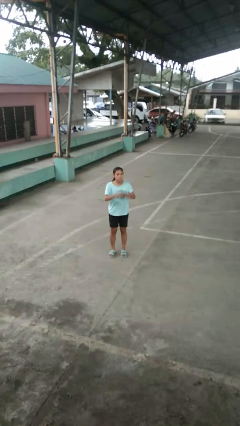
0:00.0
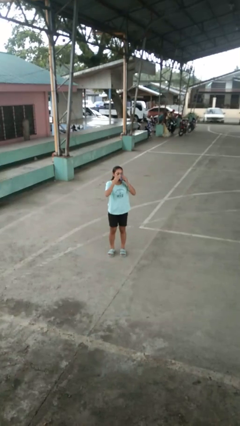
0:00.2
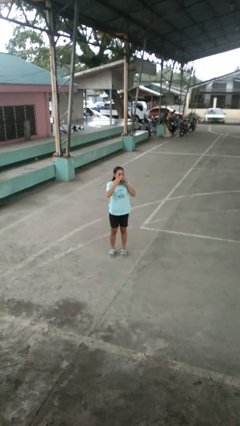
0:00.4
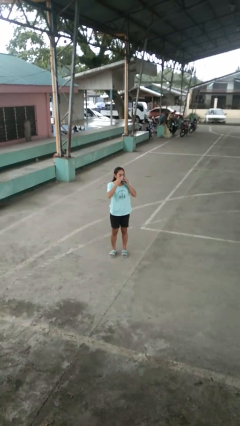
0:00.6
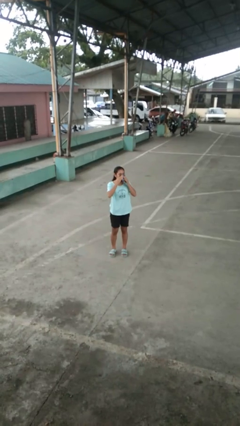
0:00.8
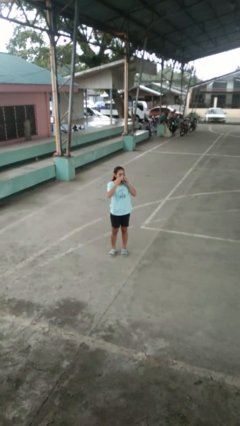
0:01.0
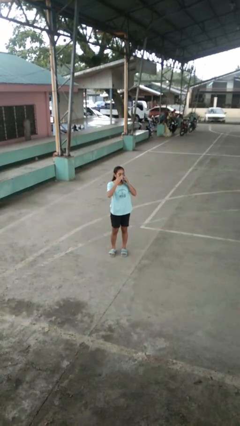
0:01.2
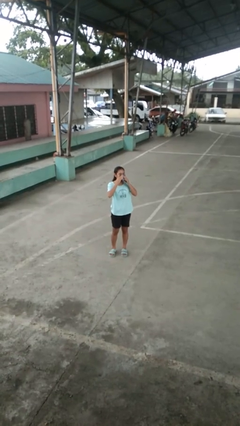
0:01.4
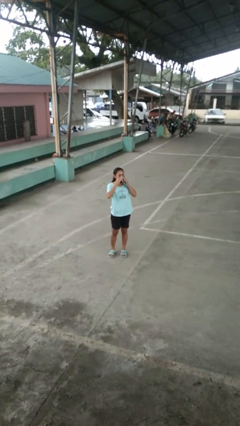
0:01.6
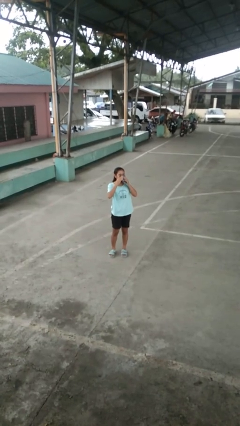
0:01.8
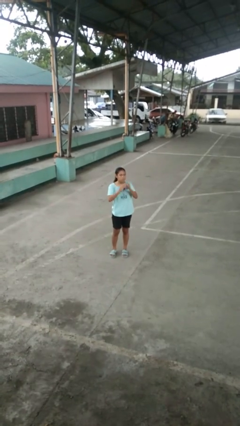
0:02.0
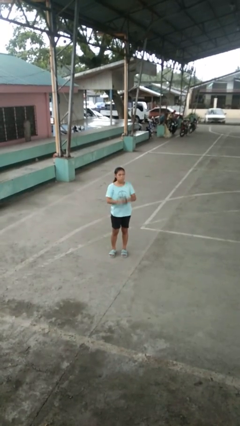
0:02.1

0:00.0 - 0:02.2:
person blows nose

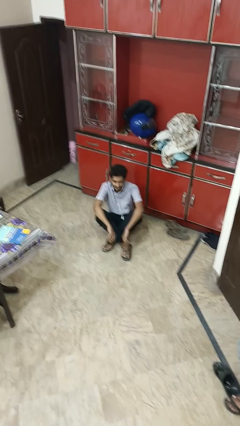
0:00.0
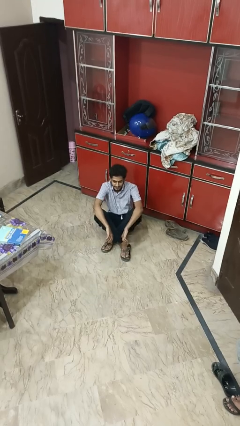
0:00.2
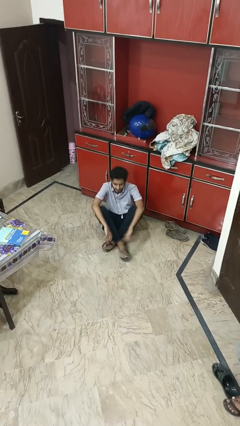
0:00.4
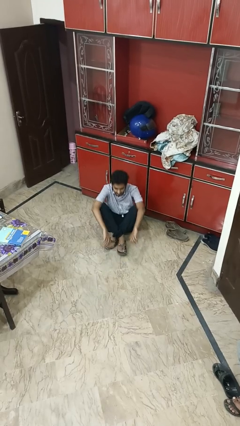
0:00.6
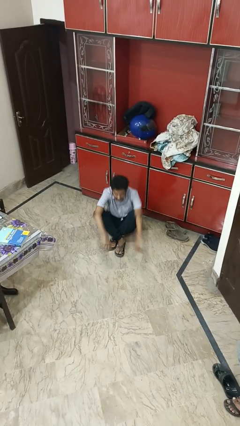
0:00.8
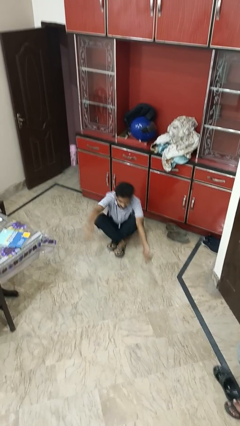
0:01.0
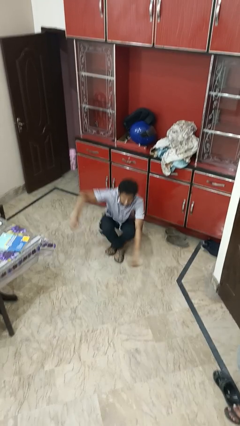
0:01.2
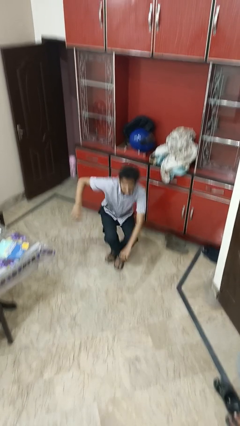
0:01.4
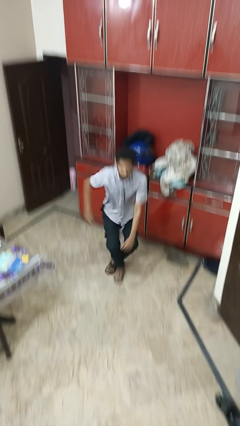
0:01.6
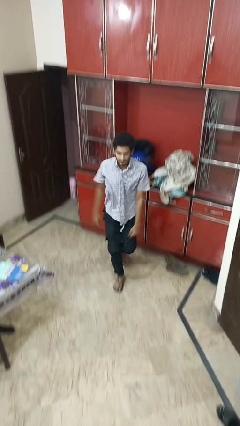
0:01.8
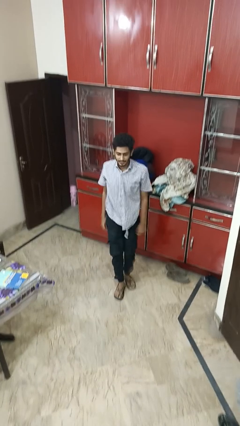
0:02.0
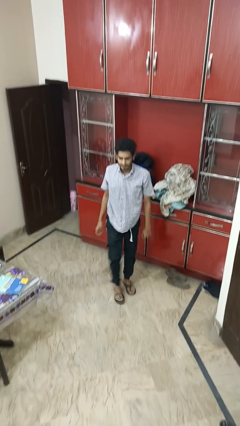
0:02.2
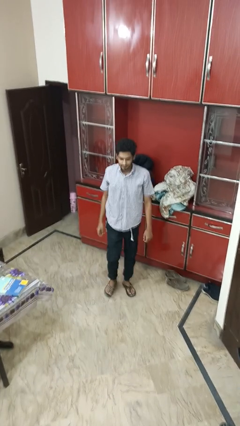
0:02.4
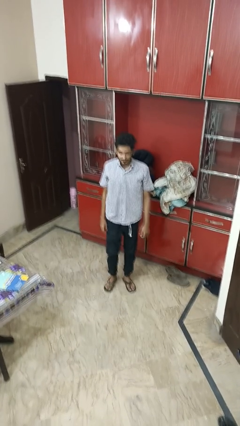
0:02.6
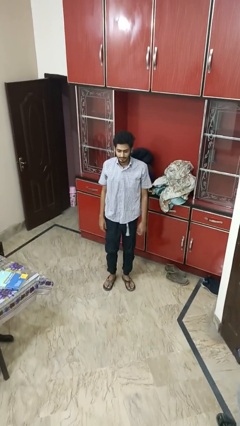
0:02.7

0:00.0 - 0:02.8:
person stands up from floor

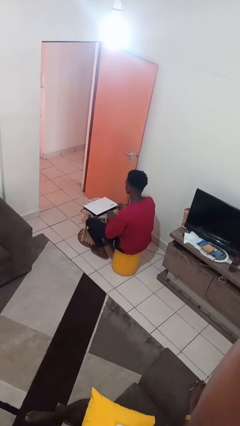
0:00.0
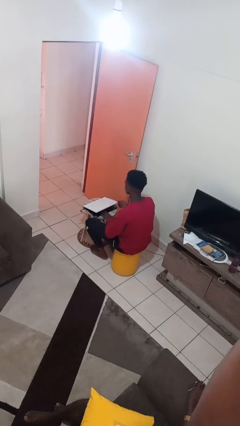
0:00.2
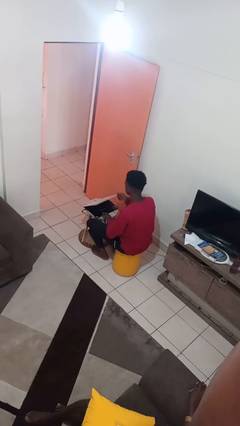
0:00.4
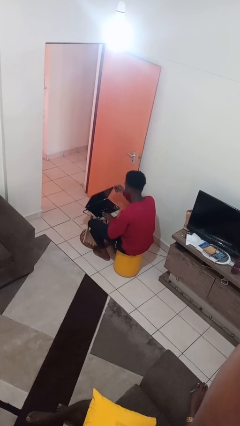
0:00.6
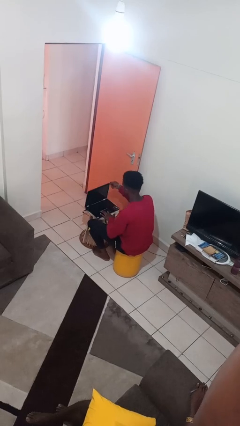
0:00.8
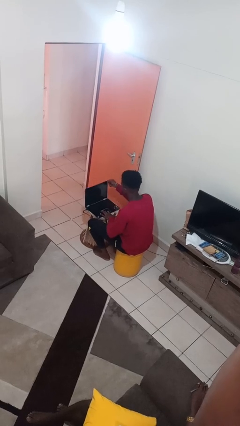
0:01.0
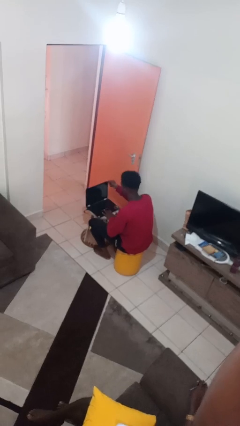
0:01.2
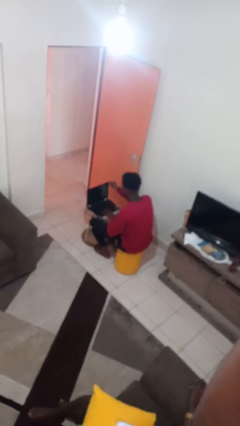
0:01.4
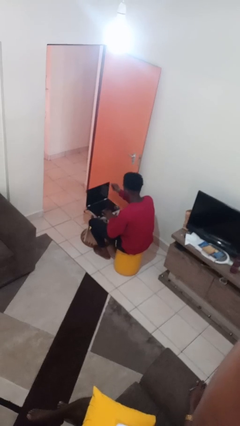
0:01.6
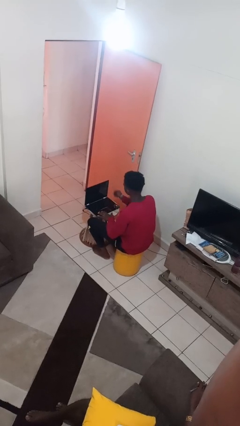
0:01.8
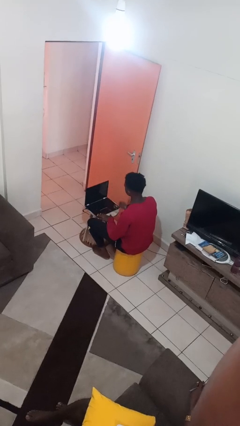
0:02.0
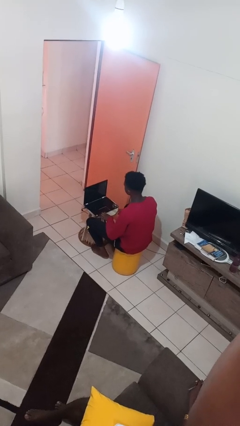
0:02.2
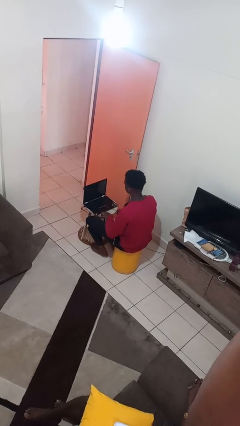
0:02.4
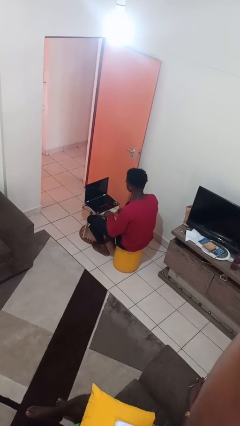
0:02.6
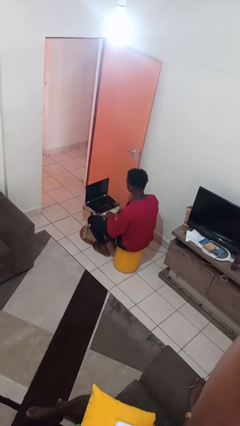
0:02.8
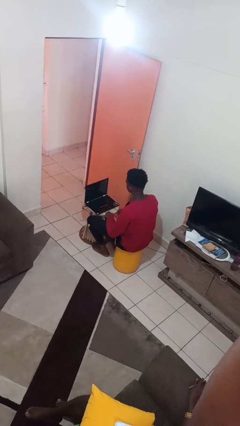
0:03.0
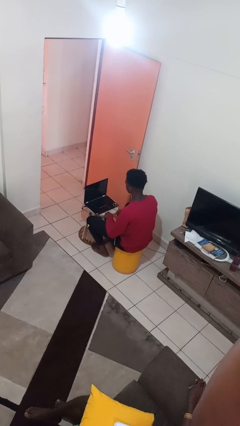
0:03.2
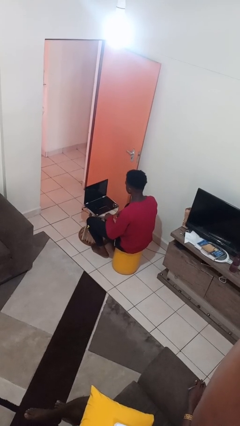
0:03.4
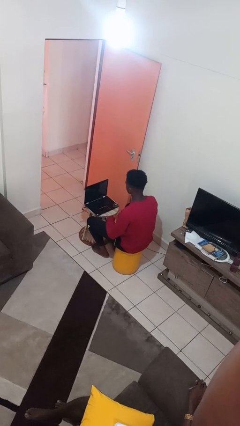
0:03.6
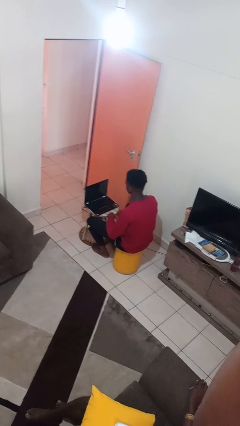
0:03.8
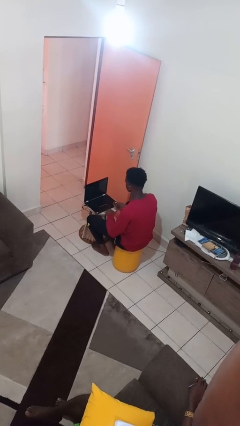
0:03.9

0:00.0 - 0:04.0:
person opens laptop

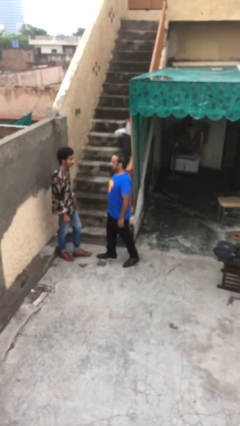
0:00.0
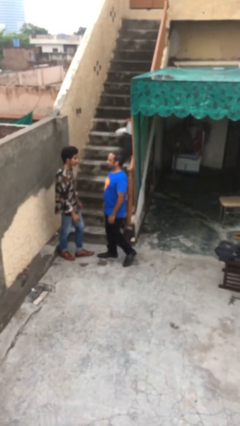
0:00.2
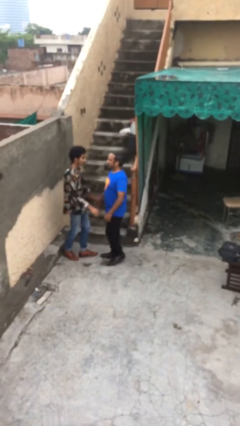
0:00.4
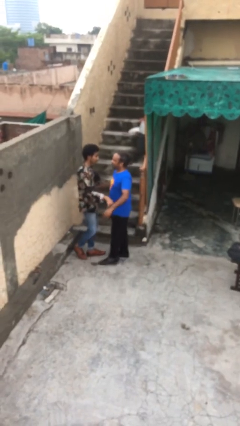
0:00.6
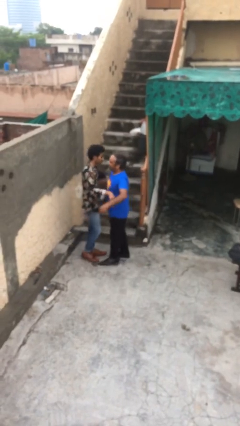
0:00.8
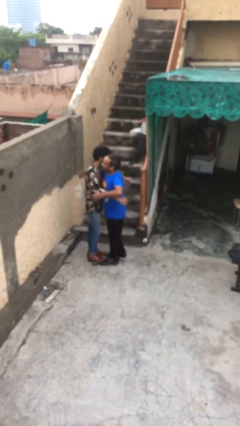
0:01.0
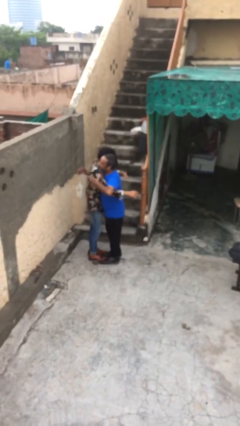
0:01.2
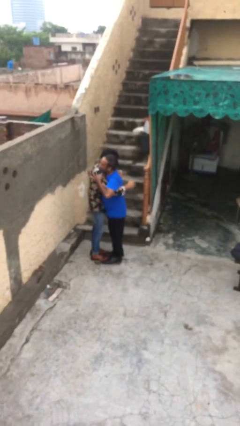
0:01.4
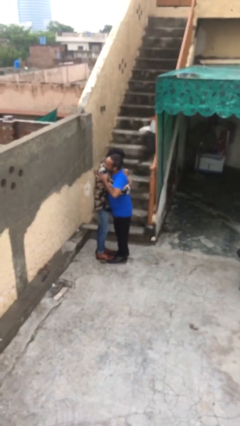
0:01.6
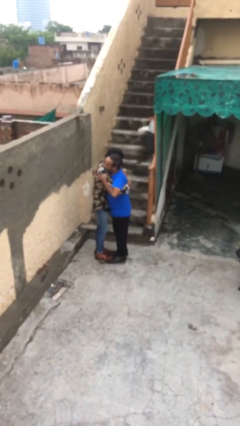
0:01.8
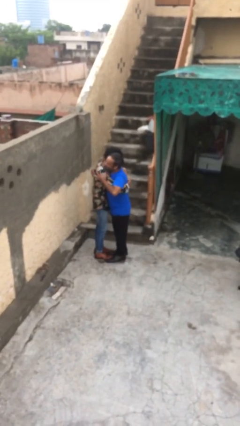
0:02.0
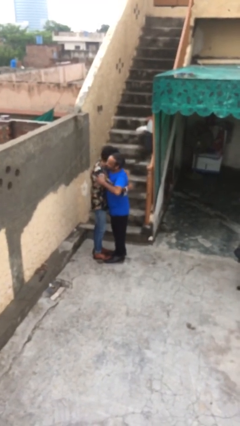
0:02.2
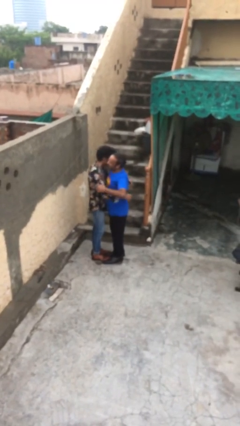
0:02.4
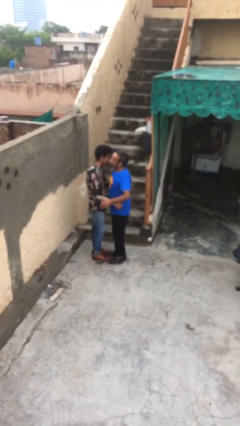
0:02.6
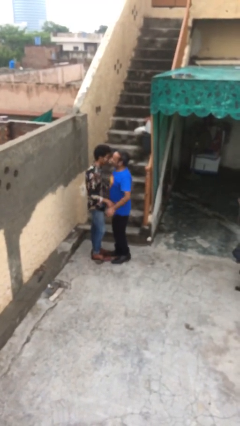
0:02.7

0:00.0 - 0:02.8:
person embraces person

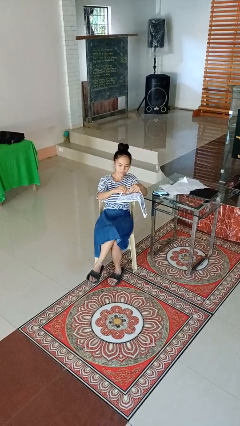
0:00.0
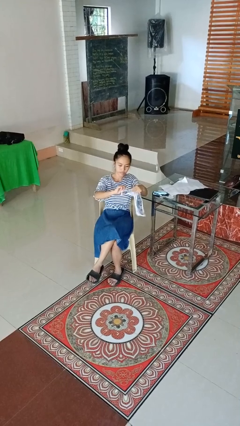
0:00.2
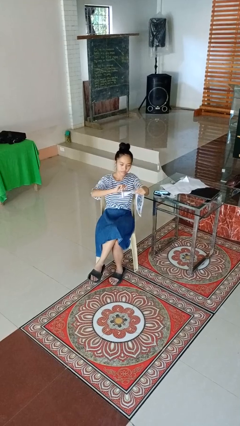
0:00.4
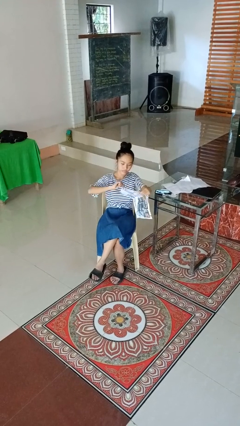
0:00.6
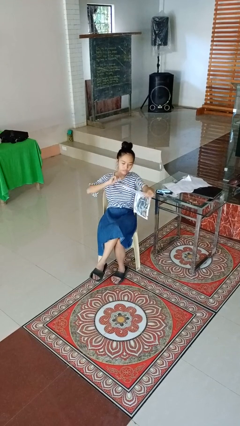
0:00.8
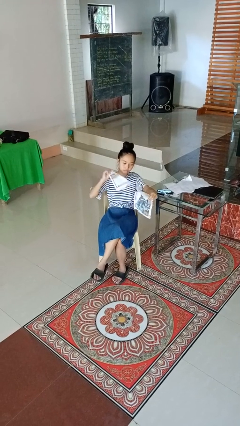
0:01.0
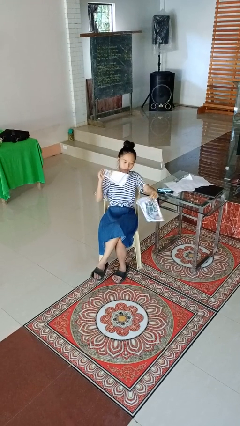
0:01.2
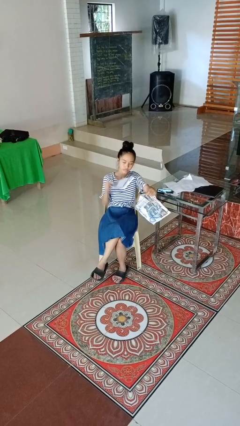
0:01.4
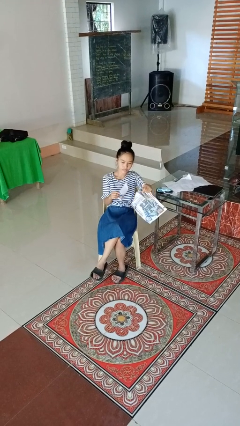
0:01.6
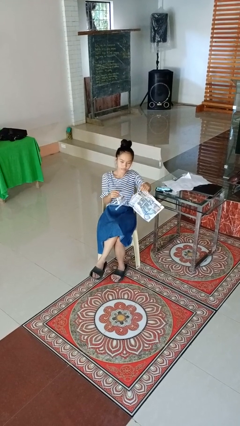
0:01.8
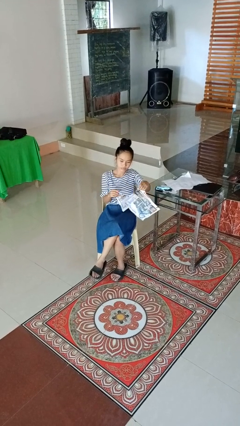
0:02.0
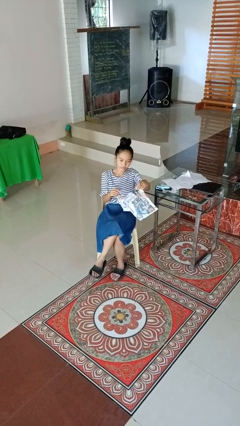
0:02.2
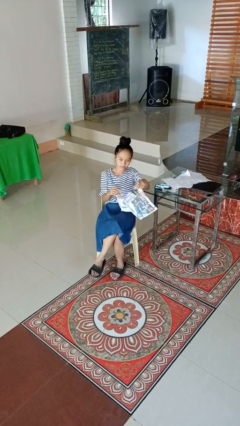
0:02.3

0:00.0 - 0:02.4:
person tears paper

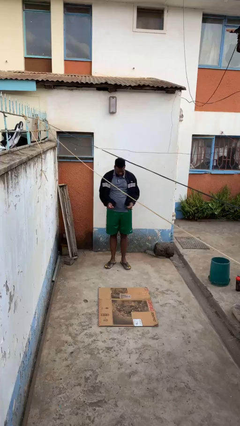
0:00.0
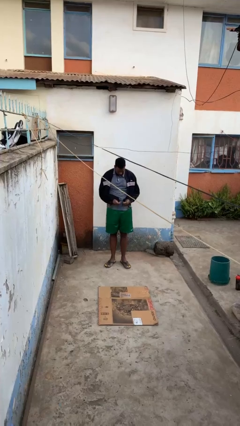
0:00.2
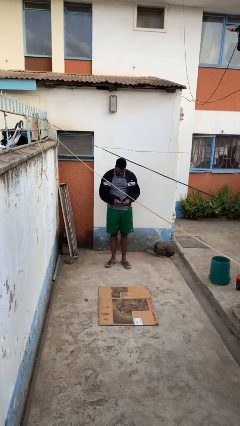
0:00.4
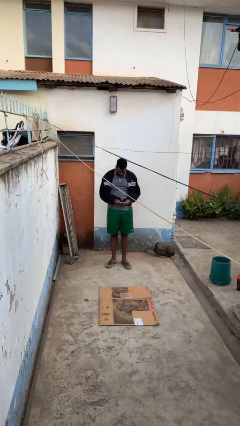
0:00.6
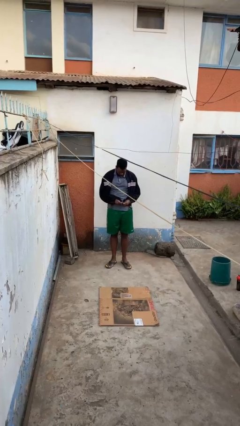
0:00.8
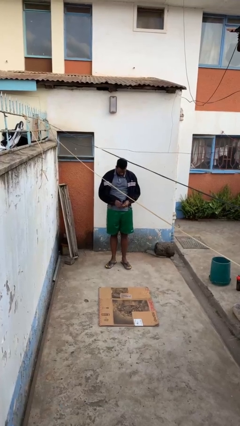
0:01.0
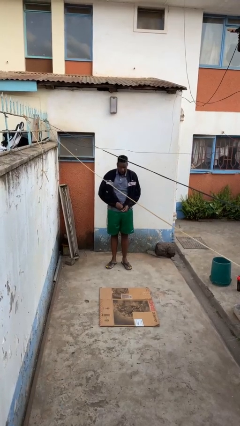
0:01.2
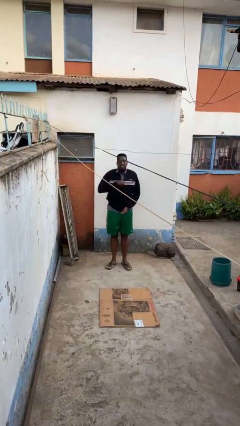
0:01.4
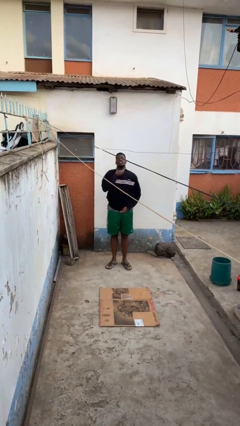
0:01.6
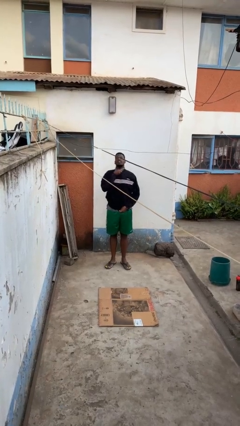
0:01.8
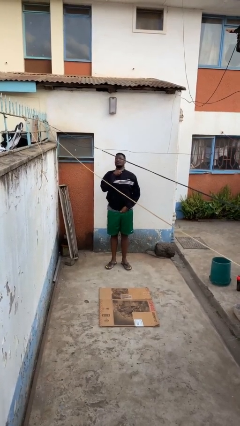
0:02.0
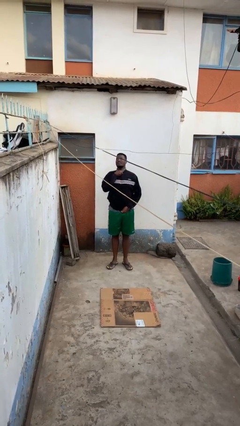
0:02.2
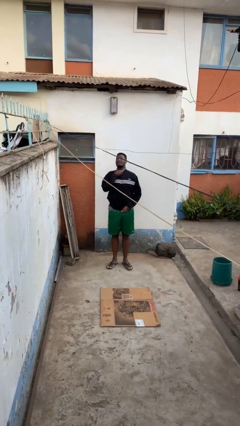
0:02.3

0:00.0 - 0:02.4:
person zips up jacket

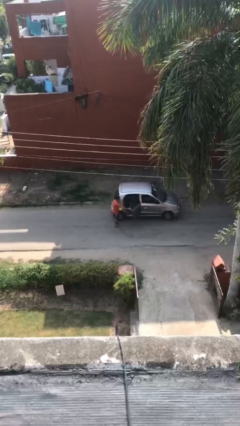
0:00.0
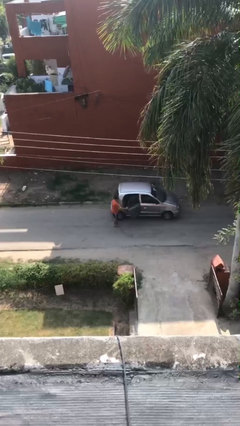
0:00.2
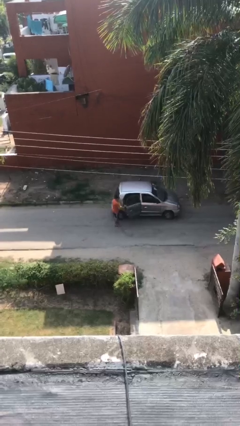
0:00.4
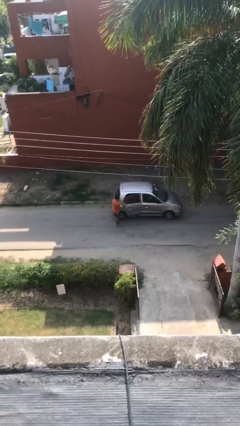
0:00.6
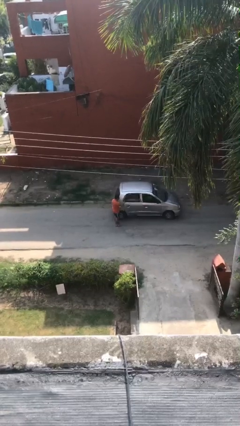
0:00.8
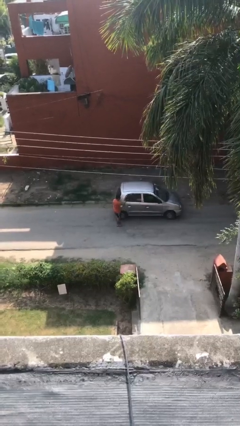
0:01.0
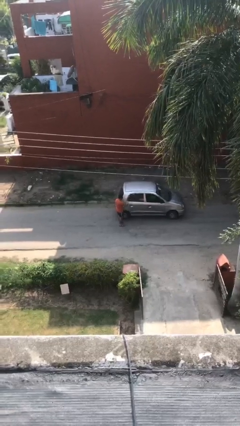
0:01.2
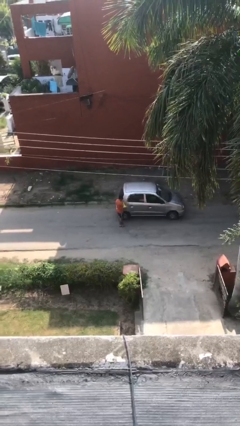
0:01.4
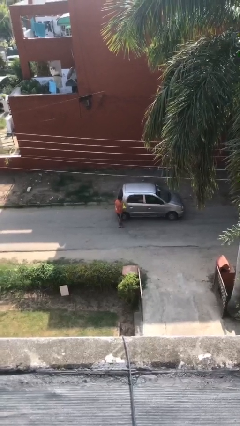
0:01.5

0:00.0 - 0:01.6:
person closes car door
